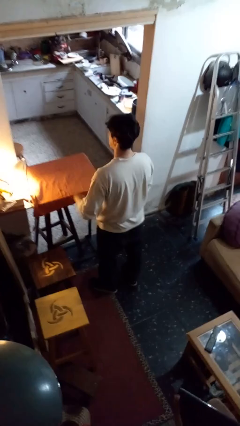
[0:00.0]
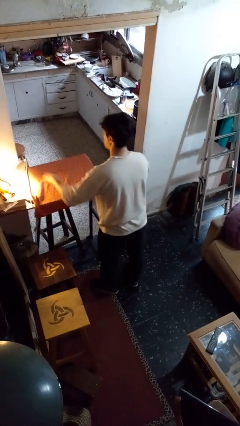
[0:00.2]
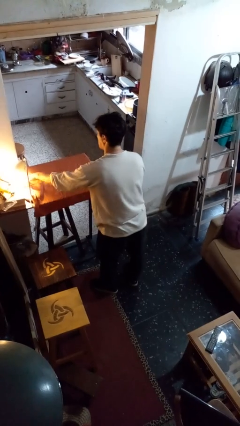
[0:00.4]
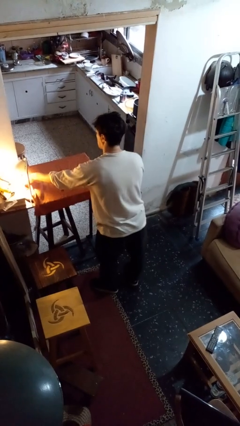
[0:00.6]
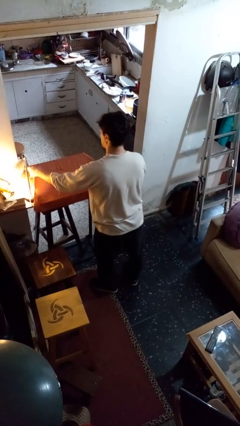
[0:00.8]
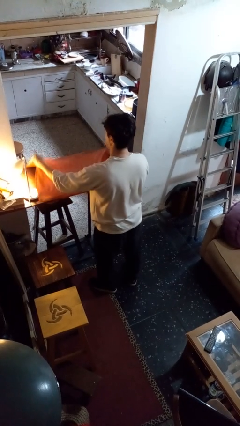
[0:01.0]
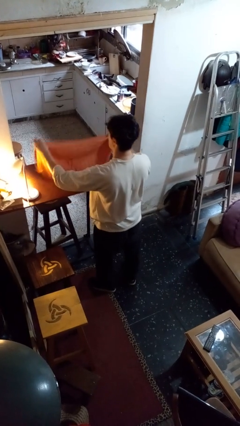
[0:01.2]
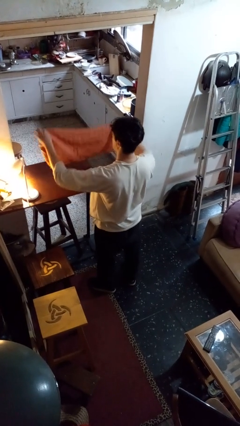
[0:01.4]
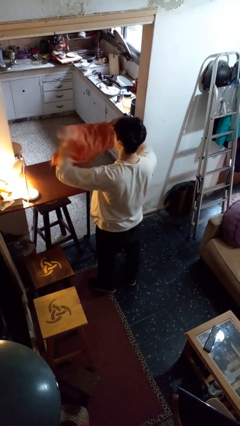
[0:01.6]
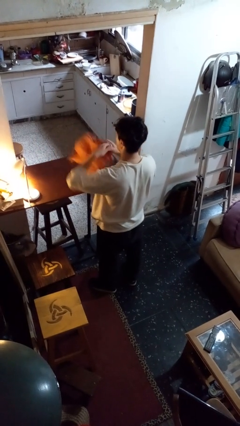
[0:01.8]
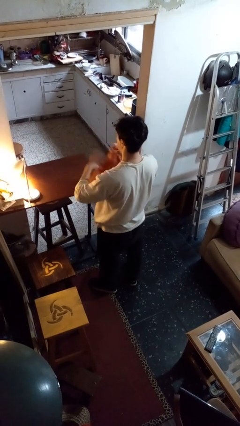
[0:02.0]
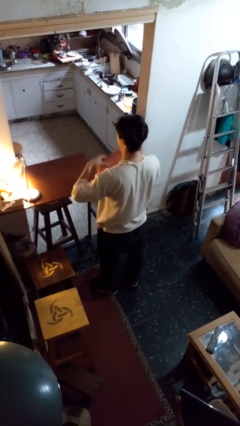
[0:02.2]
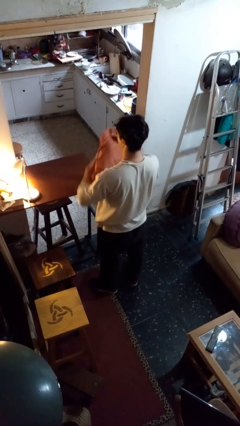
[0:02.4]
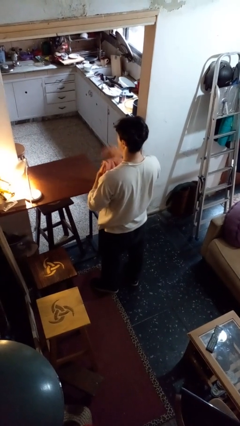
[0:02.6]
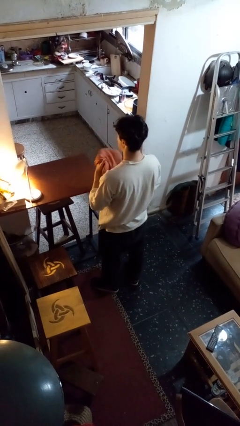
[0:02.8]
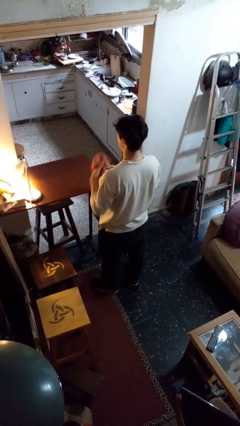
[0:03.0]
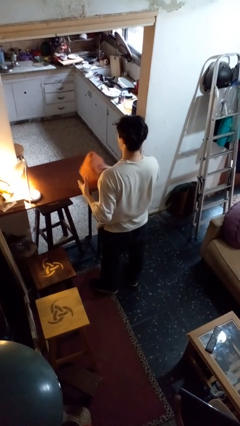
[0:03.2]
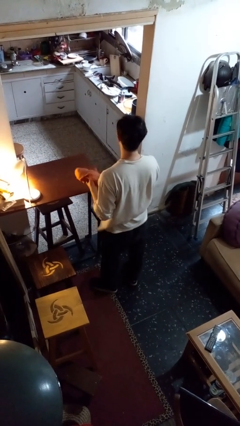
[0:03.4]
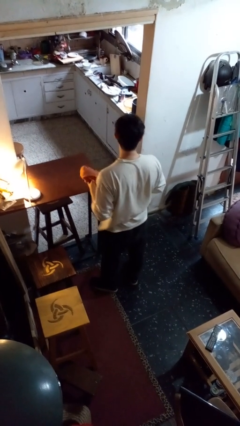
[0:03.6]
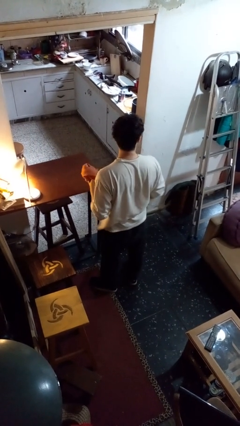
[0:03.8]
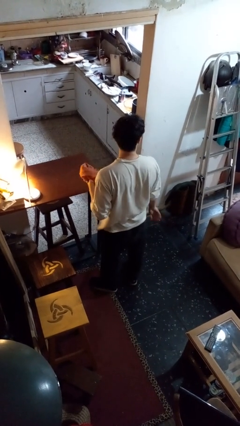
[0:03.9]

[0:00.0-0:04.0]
person folds tablecloth

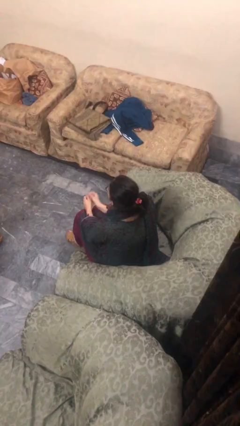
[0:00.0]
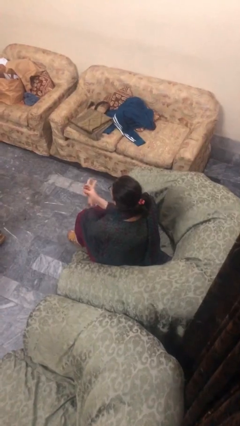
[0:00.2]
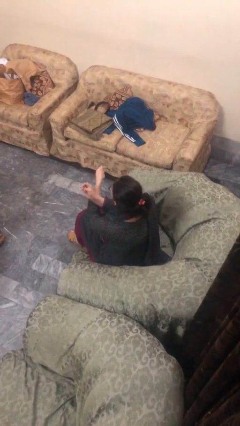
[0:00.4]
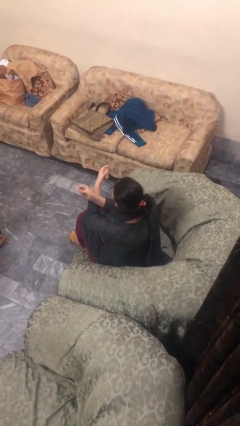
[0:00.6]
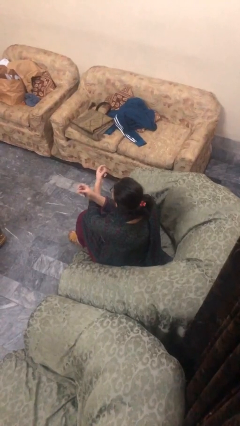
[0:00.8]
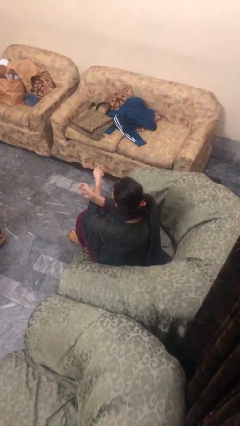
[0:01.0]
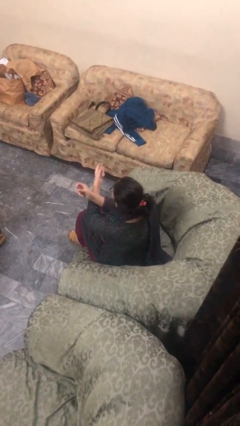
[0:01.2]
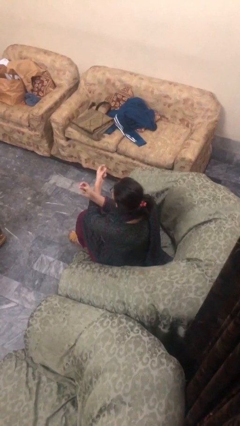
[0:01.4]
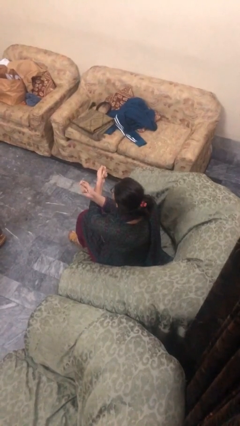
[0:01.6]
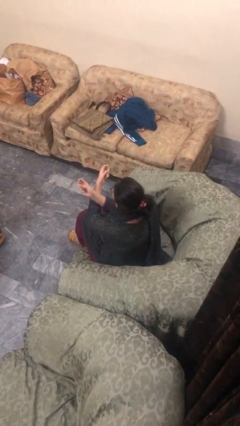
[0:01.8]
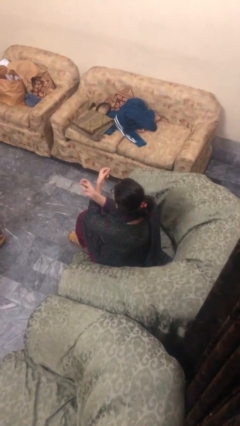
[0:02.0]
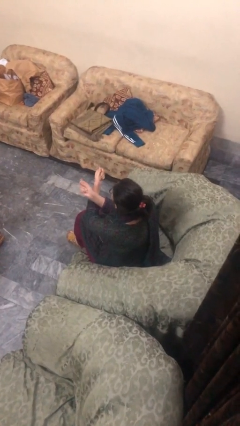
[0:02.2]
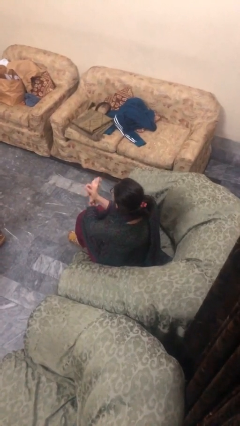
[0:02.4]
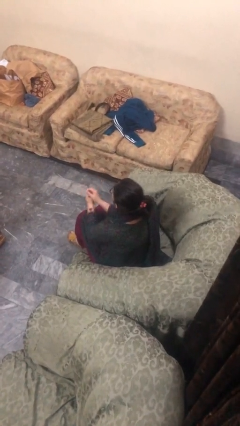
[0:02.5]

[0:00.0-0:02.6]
person snaps fingers

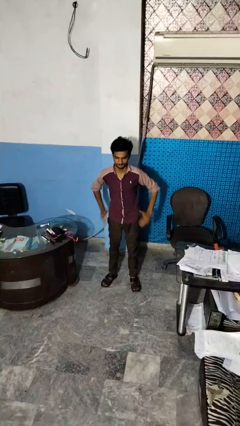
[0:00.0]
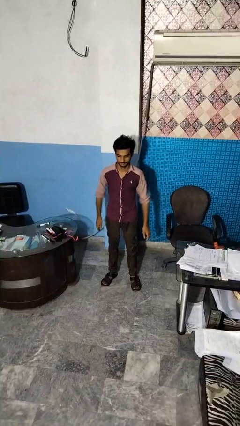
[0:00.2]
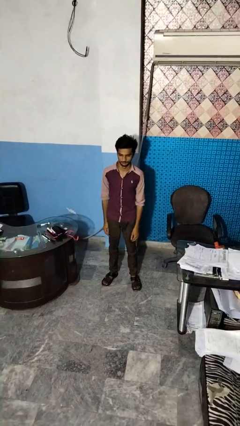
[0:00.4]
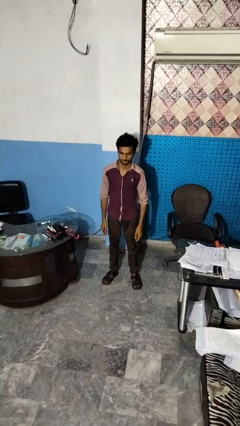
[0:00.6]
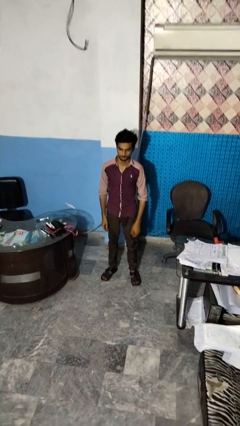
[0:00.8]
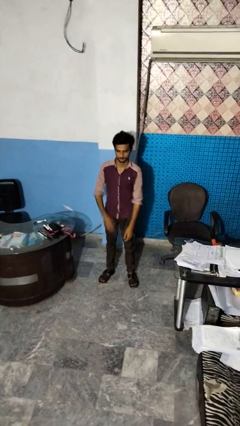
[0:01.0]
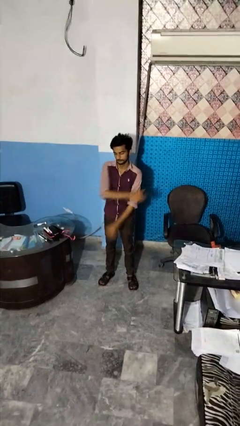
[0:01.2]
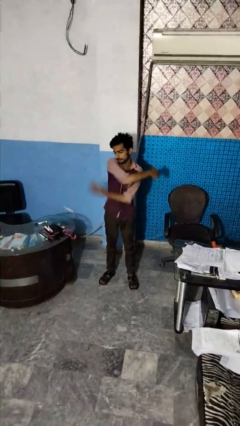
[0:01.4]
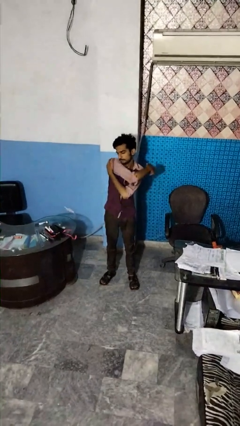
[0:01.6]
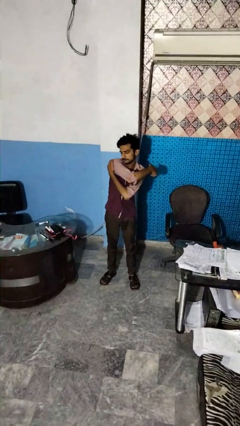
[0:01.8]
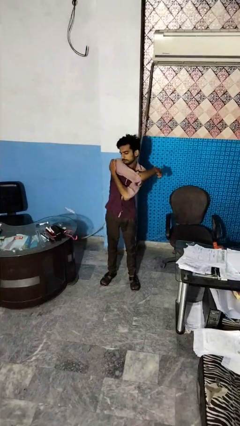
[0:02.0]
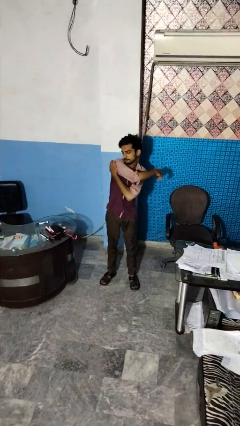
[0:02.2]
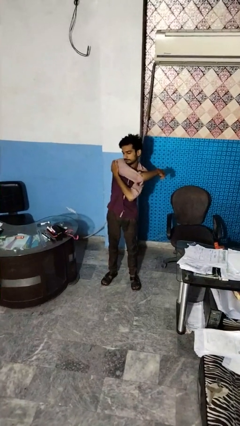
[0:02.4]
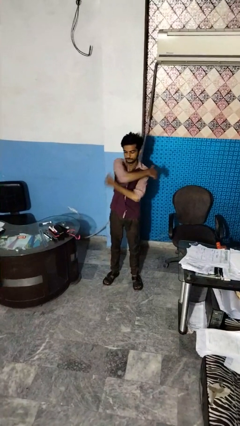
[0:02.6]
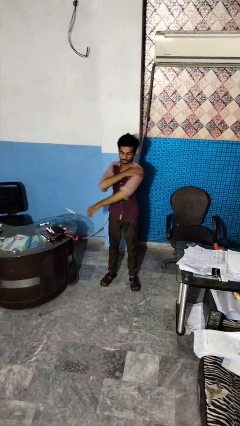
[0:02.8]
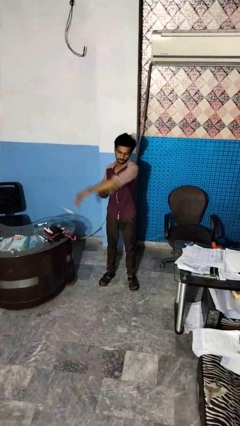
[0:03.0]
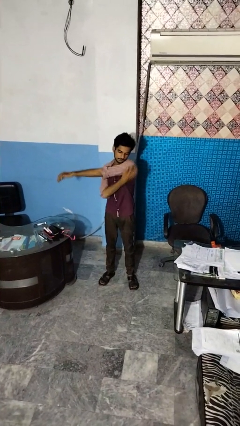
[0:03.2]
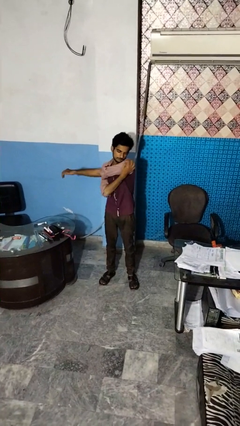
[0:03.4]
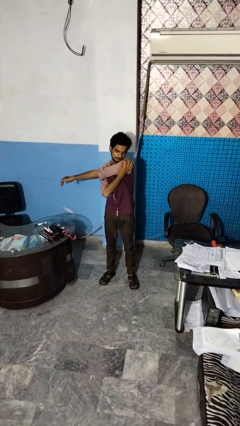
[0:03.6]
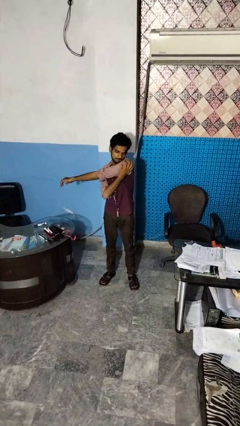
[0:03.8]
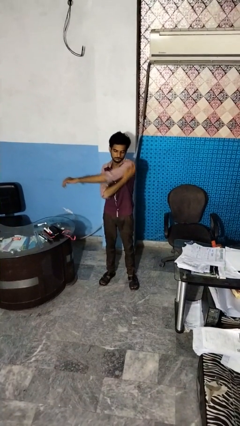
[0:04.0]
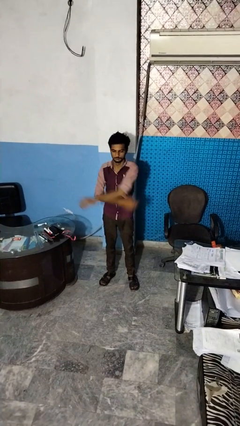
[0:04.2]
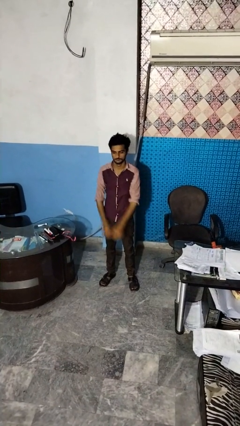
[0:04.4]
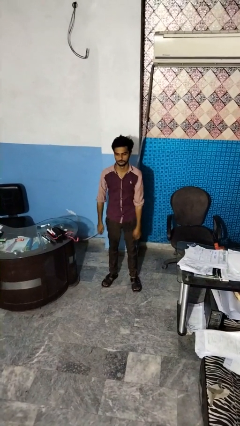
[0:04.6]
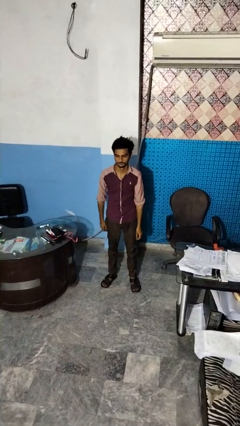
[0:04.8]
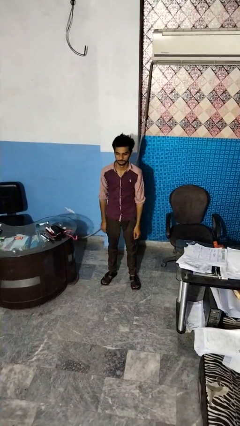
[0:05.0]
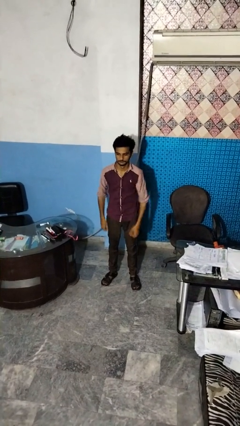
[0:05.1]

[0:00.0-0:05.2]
person stretches arms to side

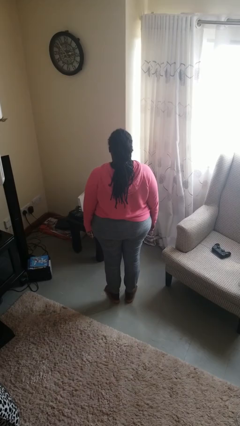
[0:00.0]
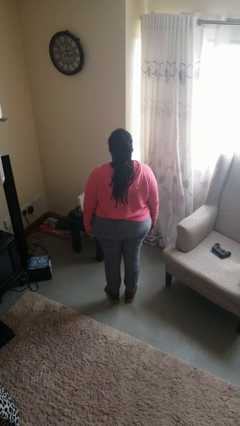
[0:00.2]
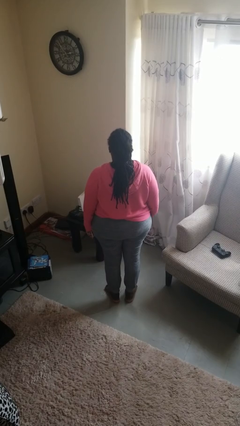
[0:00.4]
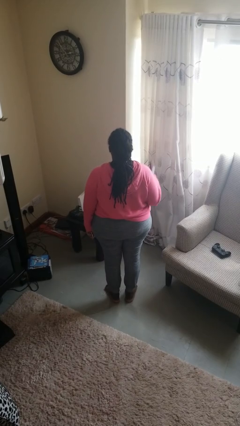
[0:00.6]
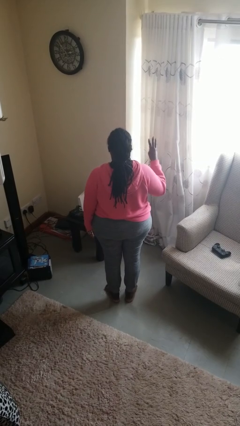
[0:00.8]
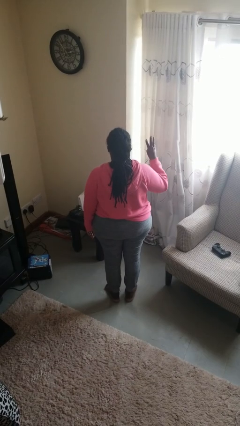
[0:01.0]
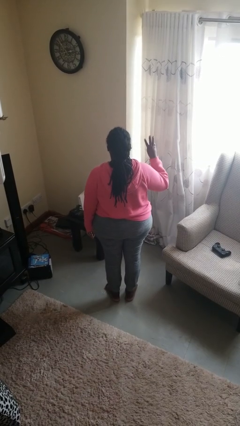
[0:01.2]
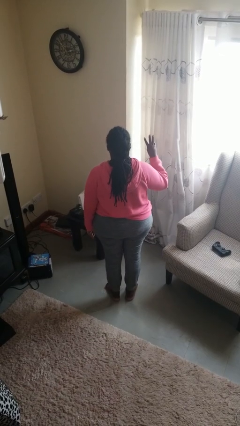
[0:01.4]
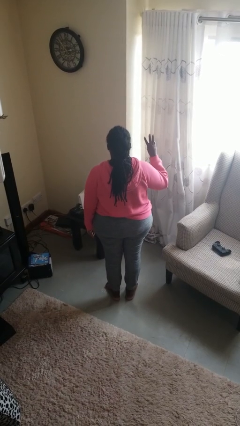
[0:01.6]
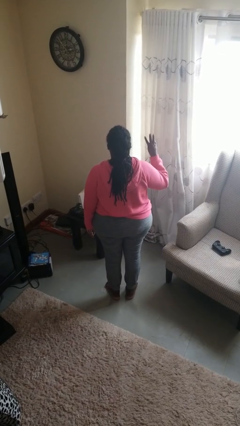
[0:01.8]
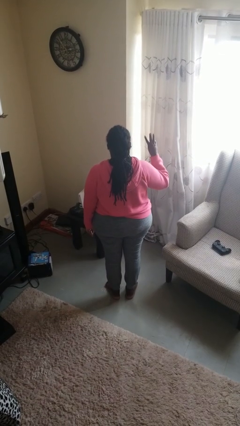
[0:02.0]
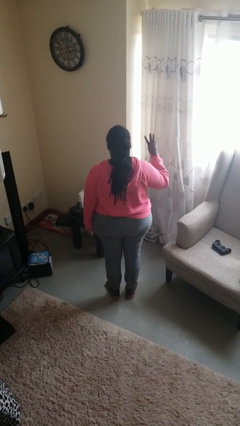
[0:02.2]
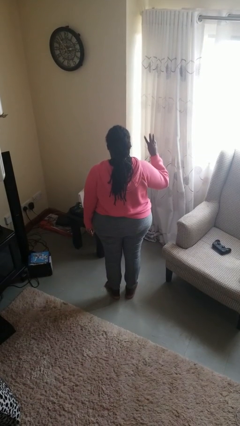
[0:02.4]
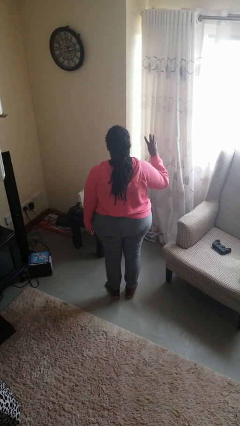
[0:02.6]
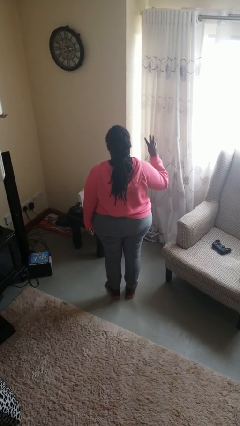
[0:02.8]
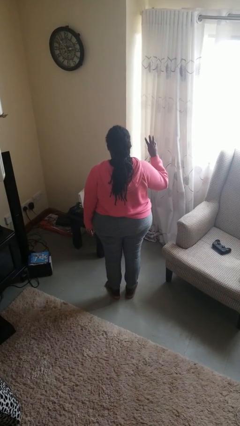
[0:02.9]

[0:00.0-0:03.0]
person gestures number three

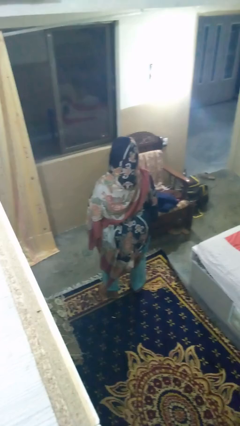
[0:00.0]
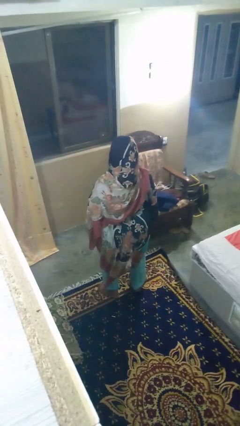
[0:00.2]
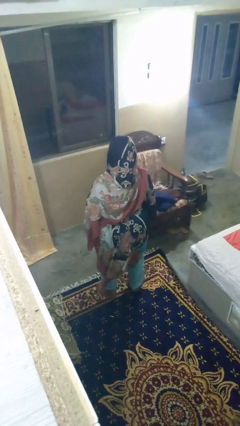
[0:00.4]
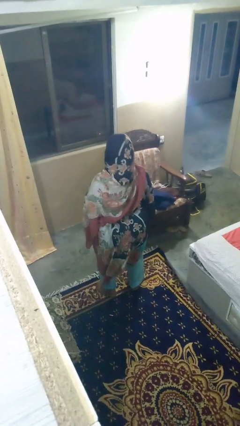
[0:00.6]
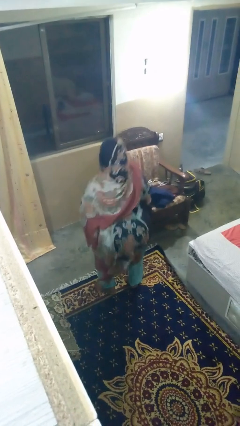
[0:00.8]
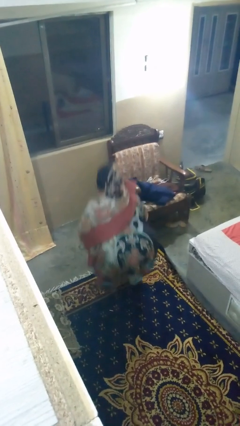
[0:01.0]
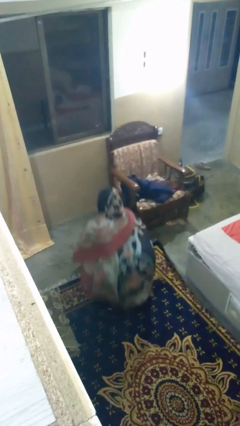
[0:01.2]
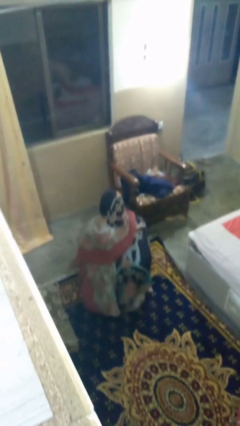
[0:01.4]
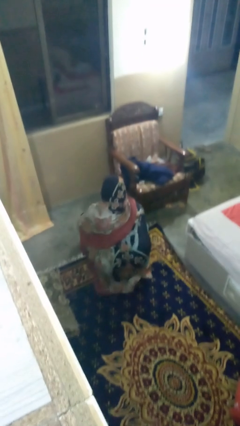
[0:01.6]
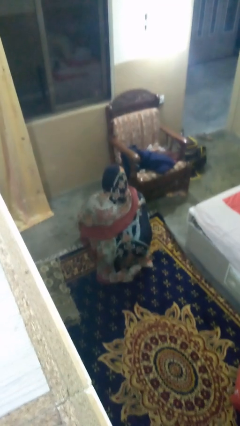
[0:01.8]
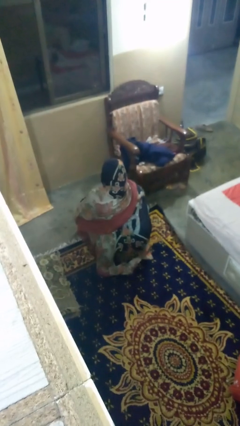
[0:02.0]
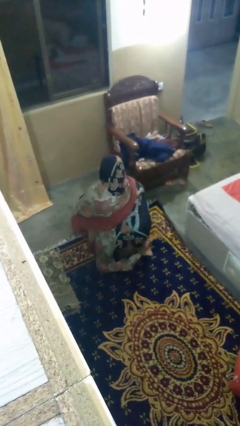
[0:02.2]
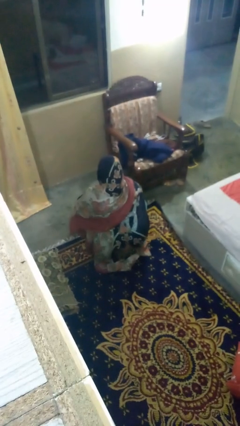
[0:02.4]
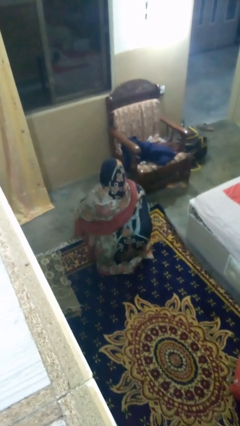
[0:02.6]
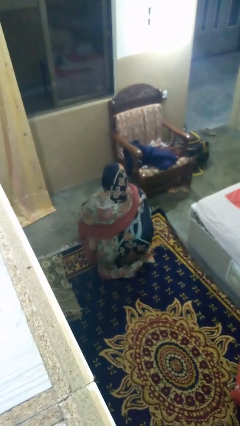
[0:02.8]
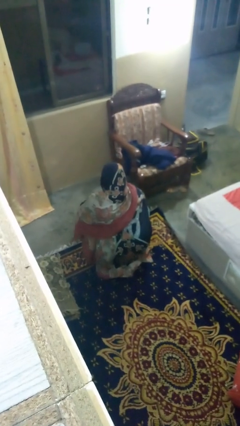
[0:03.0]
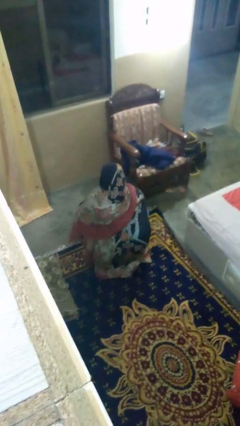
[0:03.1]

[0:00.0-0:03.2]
person squats
